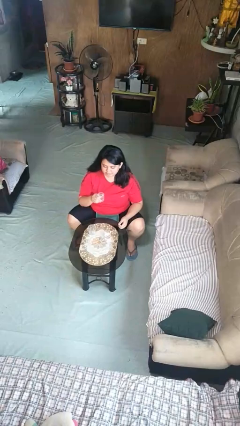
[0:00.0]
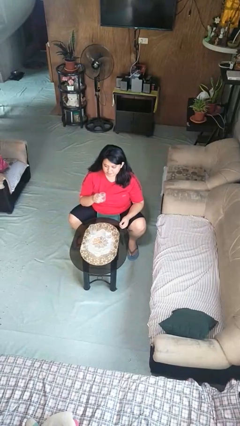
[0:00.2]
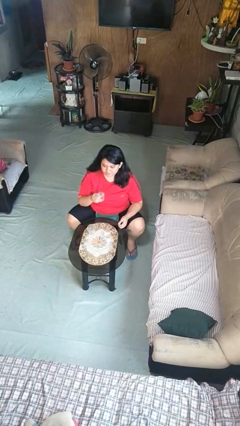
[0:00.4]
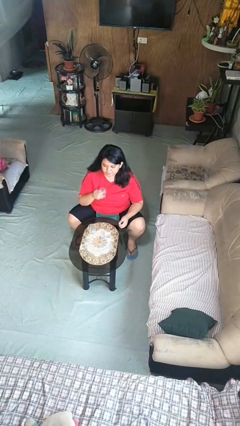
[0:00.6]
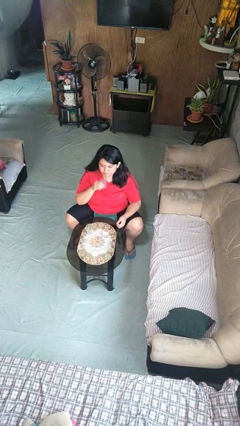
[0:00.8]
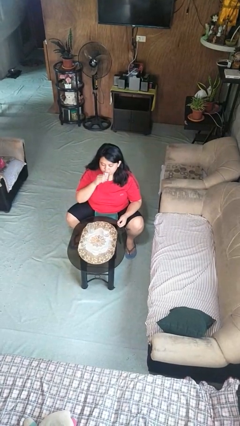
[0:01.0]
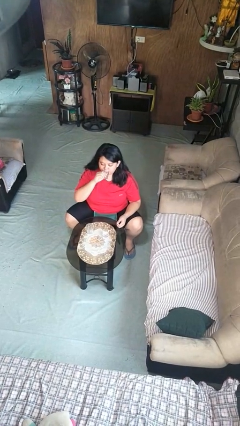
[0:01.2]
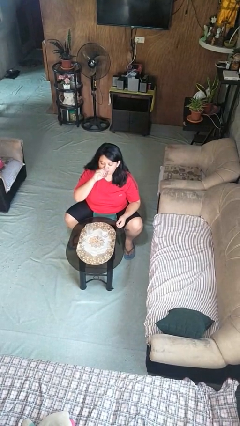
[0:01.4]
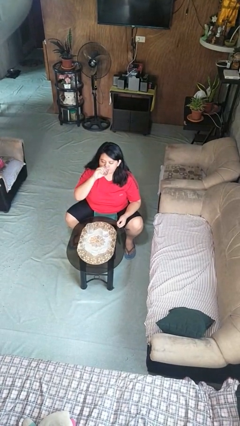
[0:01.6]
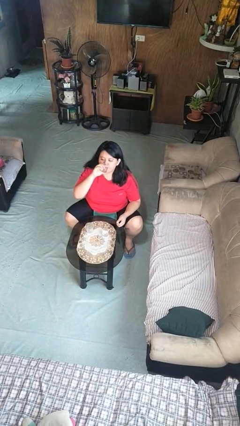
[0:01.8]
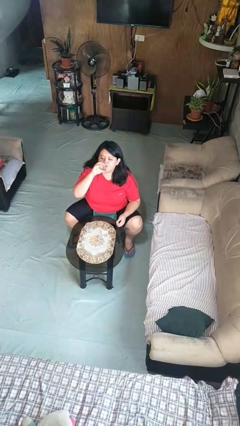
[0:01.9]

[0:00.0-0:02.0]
person drinks from shotglass

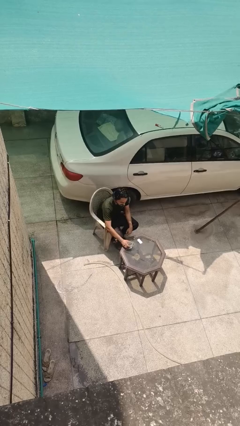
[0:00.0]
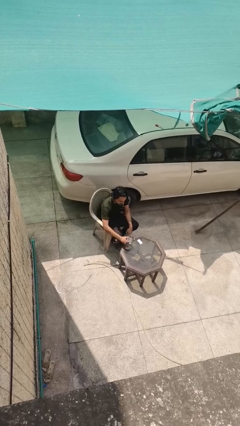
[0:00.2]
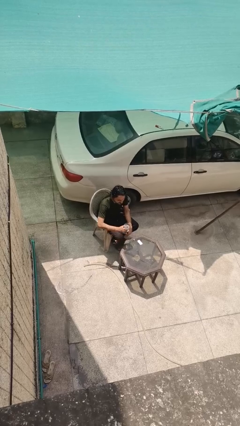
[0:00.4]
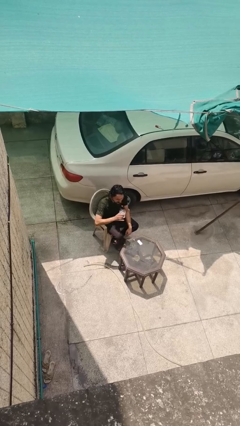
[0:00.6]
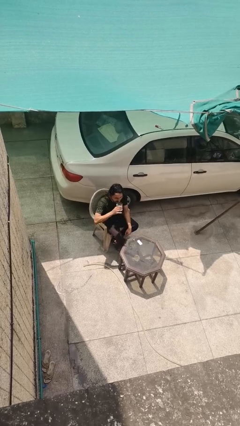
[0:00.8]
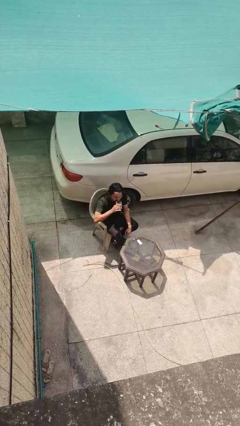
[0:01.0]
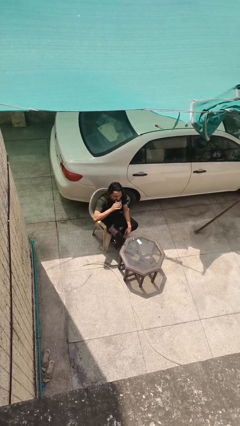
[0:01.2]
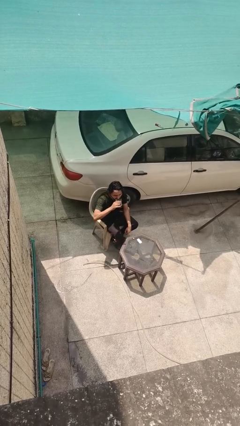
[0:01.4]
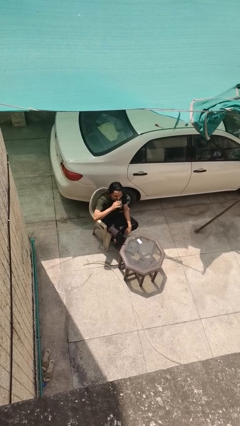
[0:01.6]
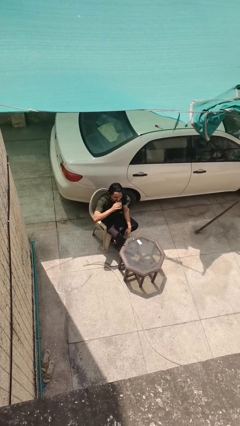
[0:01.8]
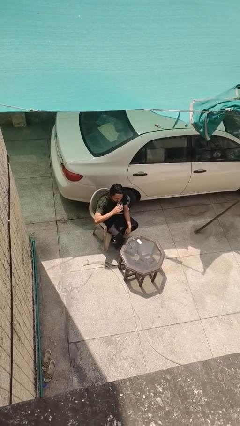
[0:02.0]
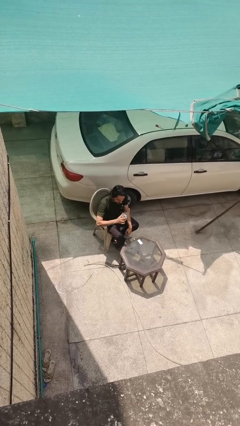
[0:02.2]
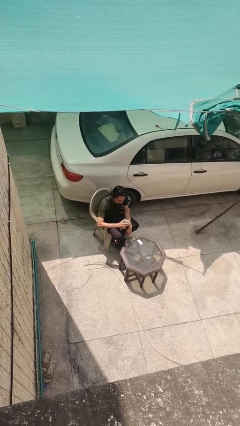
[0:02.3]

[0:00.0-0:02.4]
person drinks from cup

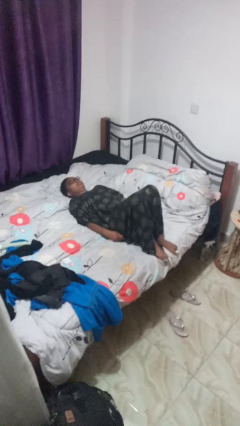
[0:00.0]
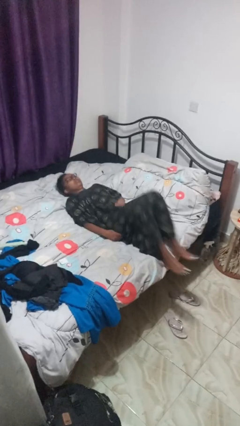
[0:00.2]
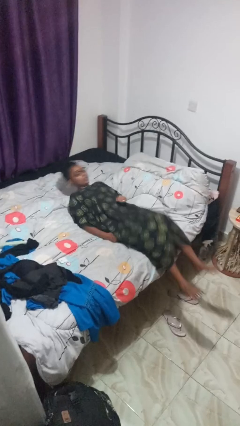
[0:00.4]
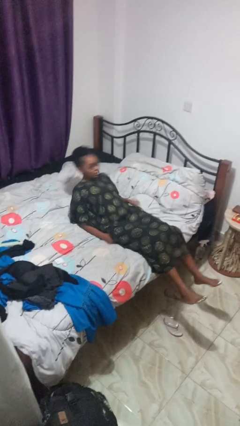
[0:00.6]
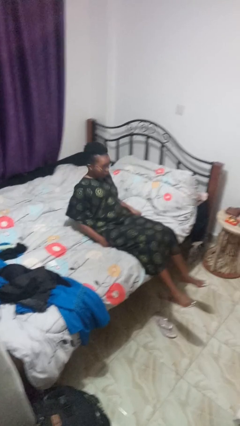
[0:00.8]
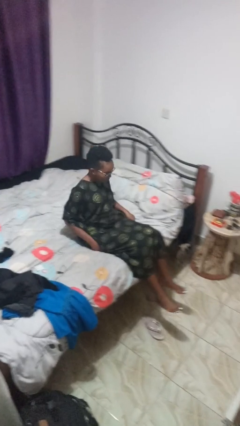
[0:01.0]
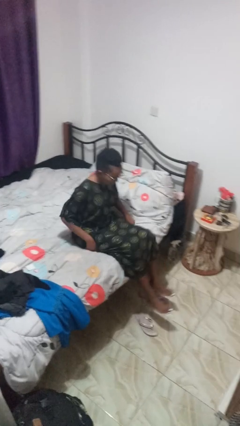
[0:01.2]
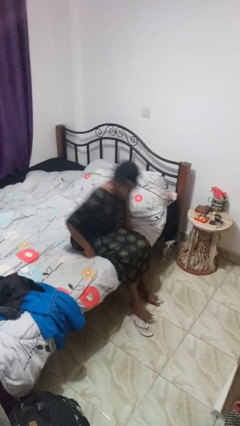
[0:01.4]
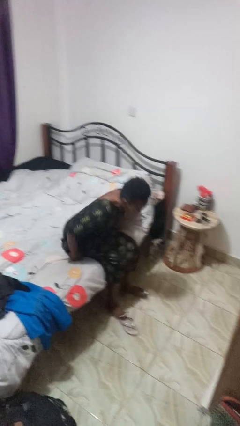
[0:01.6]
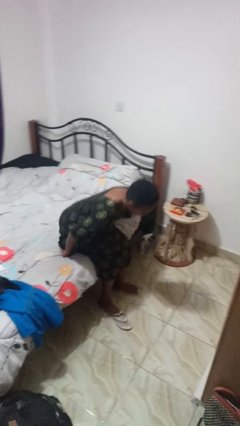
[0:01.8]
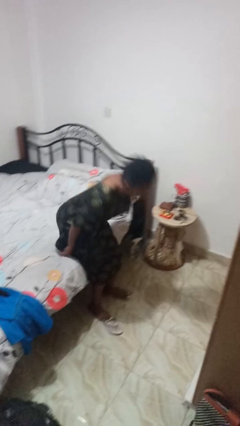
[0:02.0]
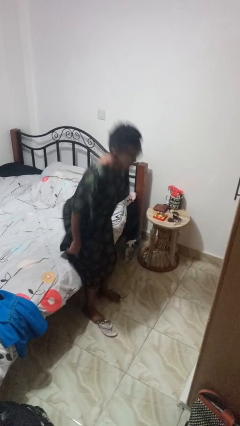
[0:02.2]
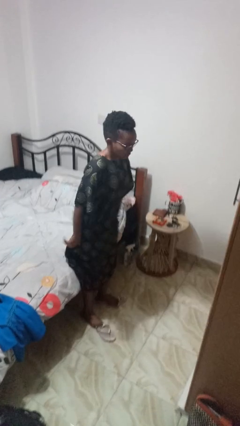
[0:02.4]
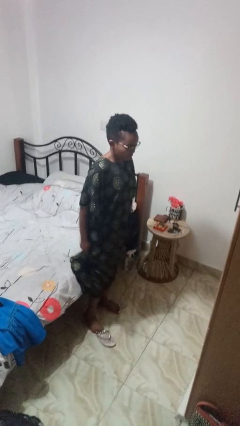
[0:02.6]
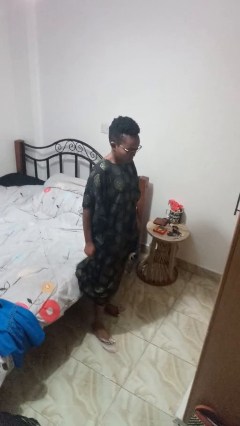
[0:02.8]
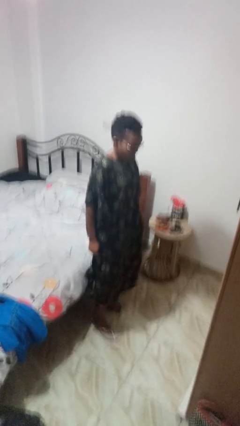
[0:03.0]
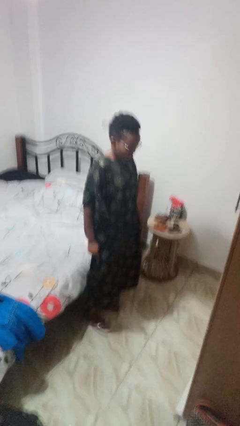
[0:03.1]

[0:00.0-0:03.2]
person stands up

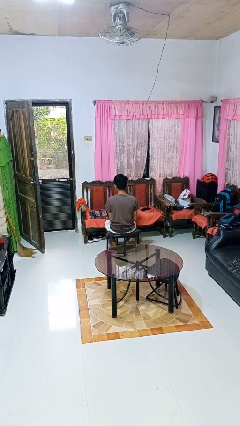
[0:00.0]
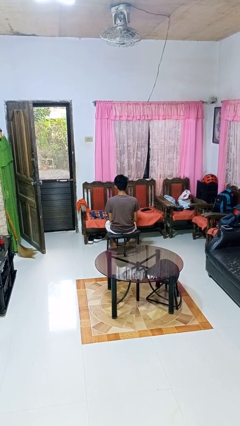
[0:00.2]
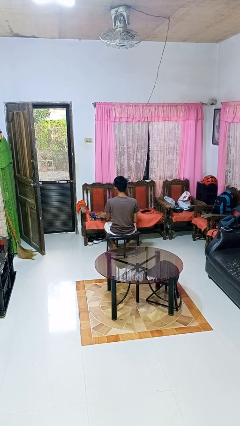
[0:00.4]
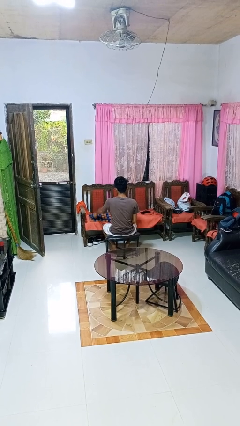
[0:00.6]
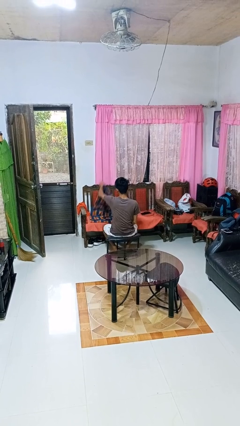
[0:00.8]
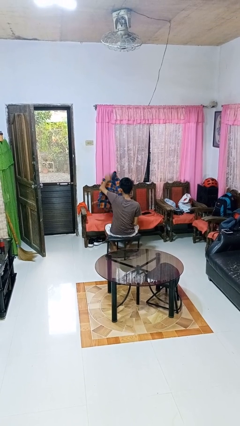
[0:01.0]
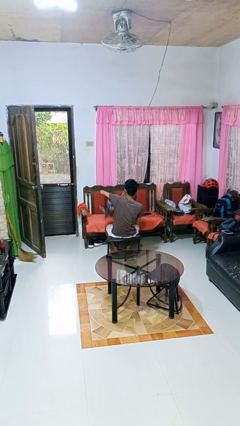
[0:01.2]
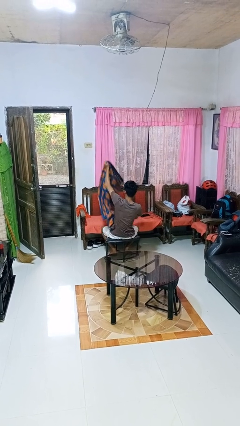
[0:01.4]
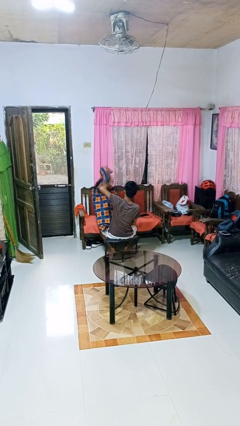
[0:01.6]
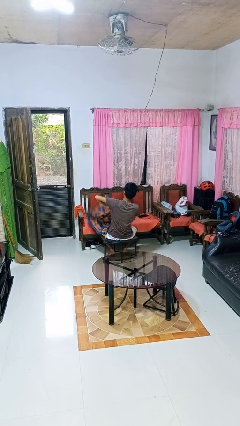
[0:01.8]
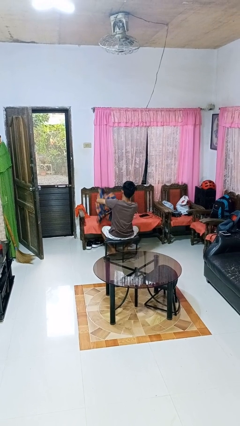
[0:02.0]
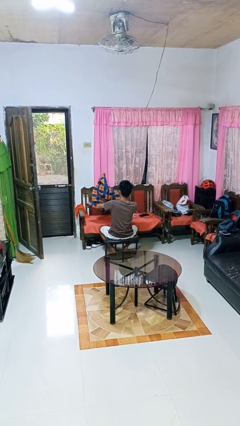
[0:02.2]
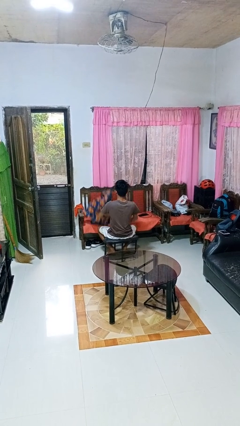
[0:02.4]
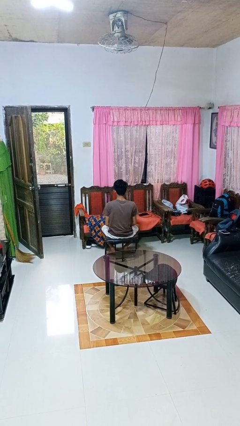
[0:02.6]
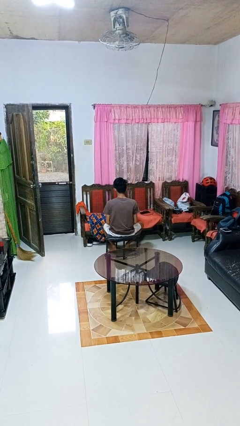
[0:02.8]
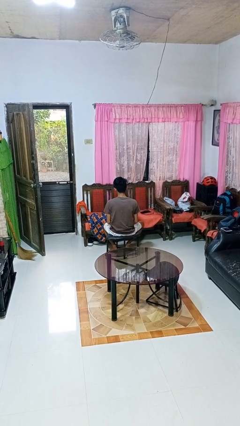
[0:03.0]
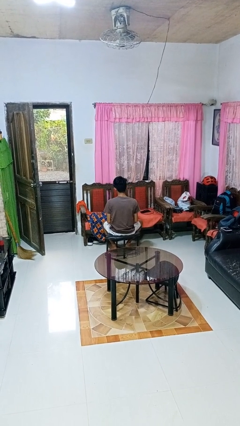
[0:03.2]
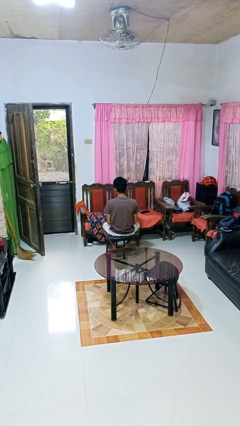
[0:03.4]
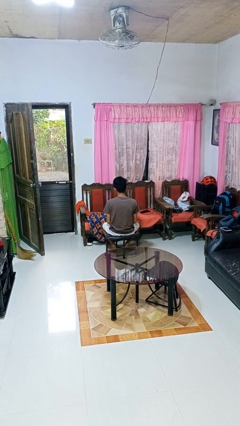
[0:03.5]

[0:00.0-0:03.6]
person unfolds blanket

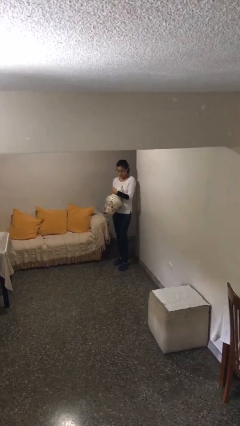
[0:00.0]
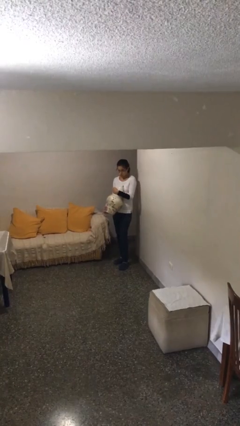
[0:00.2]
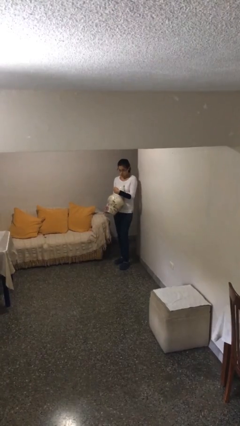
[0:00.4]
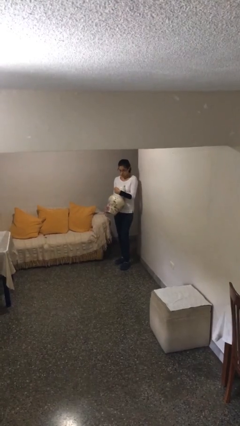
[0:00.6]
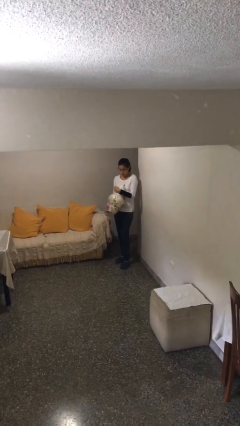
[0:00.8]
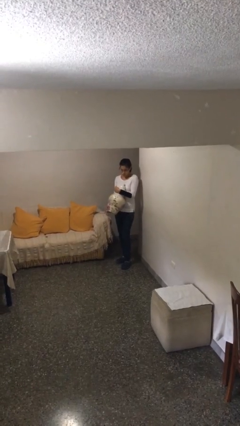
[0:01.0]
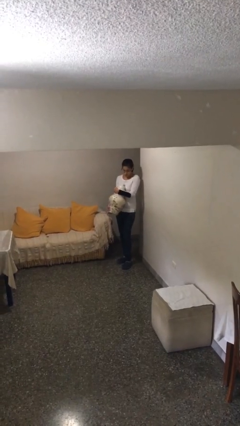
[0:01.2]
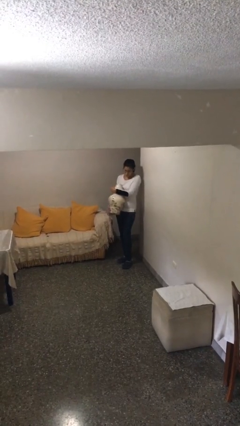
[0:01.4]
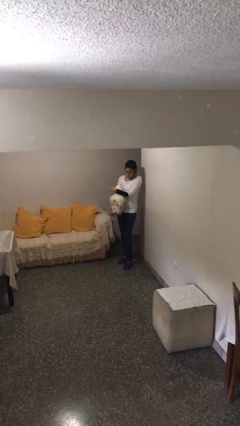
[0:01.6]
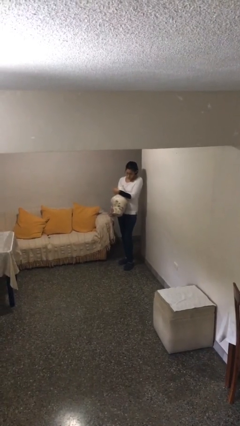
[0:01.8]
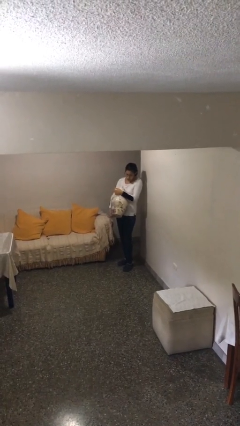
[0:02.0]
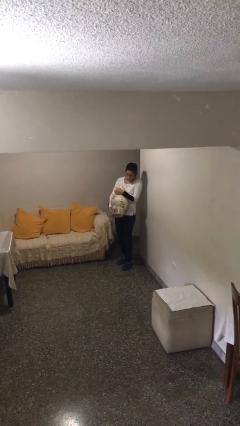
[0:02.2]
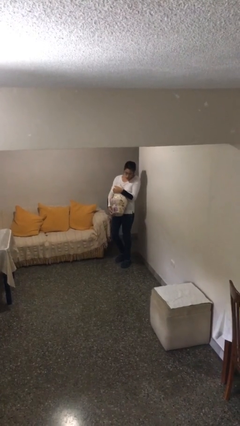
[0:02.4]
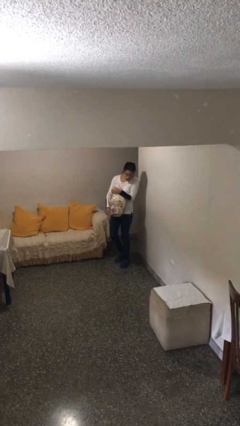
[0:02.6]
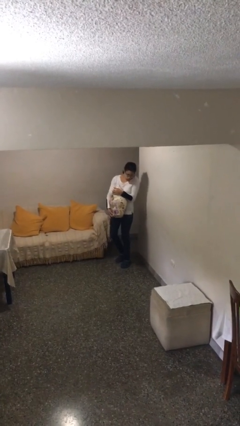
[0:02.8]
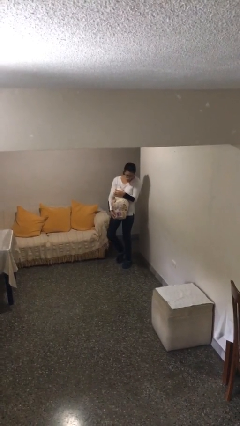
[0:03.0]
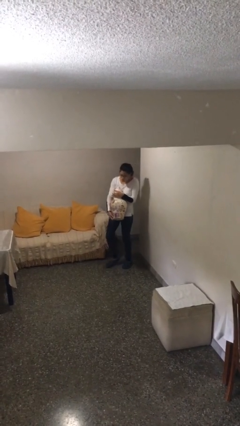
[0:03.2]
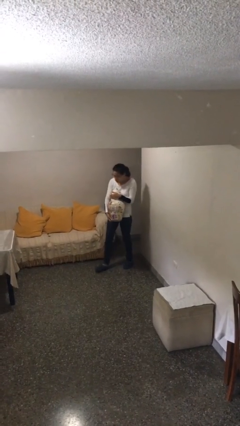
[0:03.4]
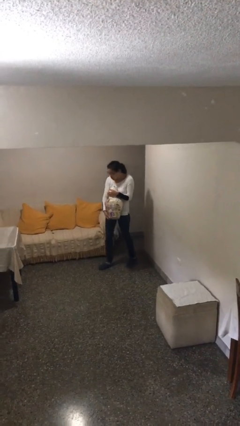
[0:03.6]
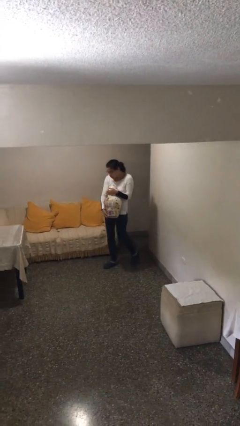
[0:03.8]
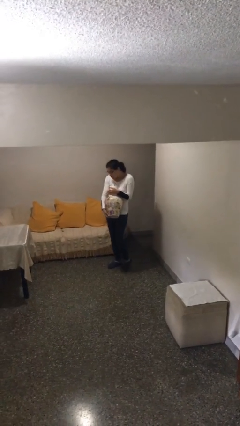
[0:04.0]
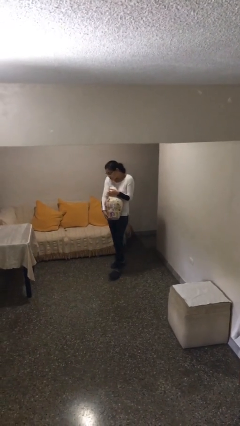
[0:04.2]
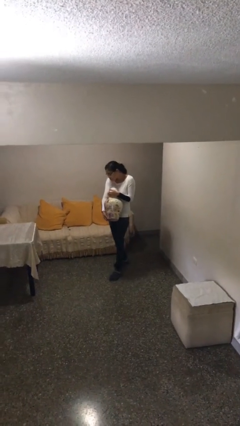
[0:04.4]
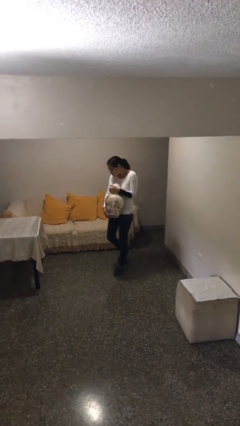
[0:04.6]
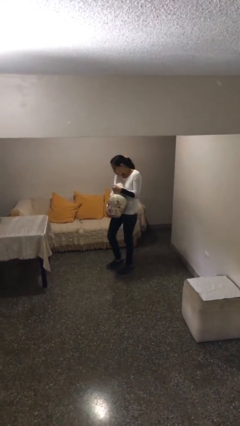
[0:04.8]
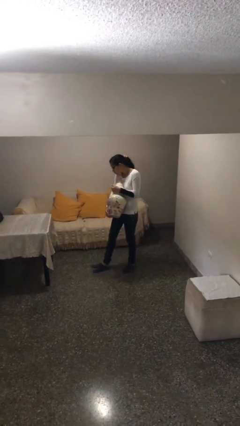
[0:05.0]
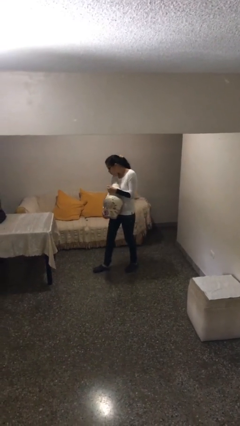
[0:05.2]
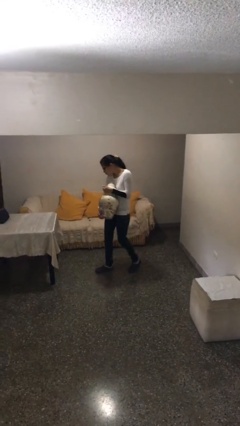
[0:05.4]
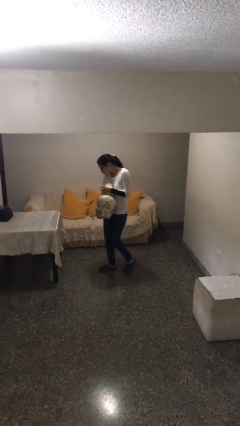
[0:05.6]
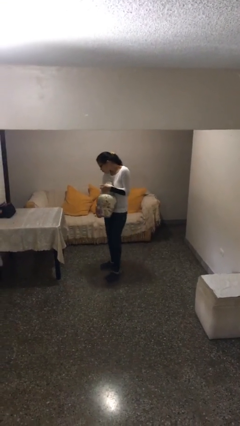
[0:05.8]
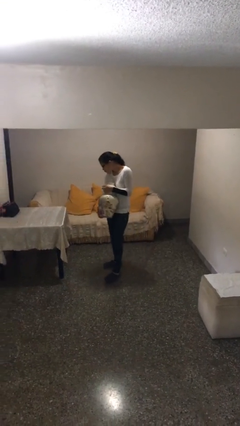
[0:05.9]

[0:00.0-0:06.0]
person carries heavy object

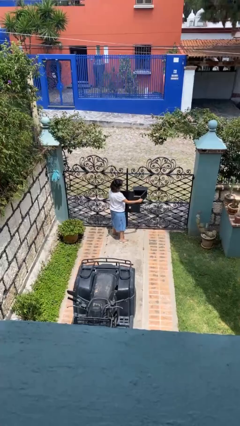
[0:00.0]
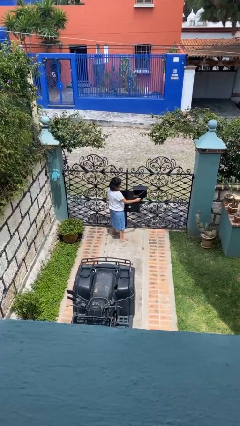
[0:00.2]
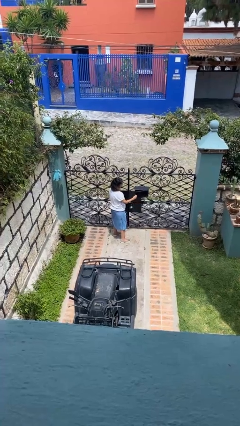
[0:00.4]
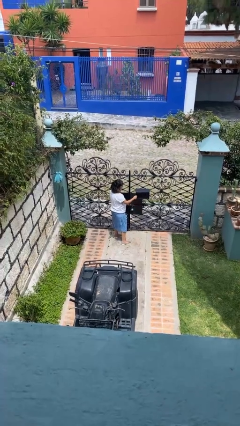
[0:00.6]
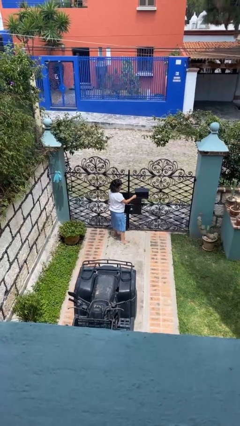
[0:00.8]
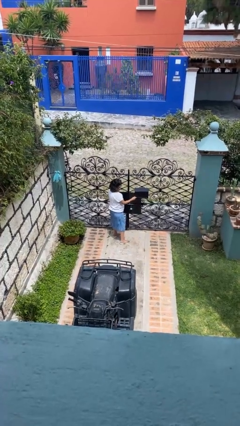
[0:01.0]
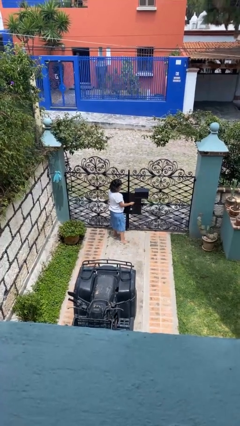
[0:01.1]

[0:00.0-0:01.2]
person closes mailbox
